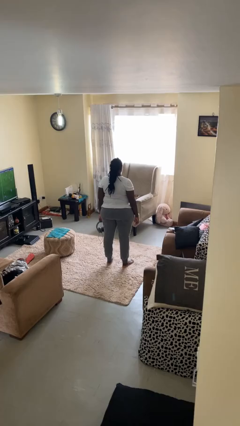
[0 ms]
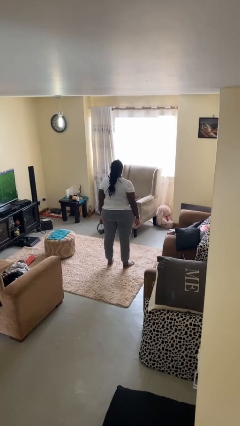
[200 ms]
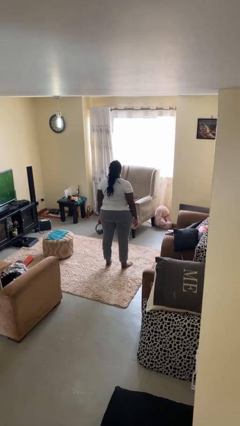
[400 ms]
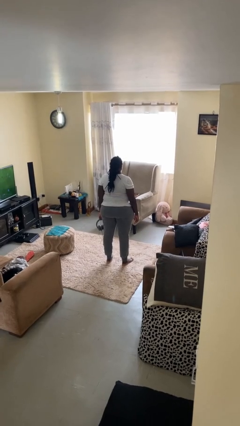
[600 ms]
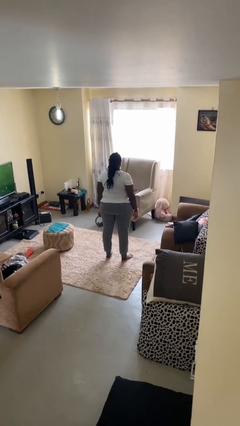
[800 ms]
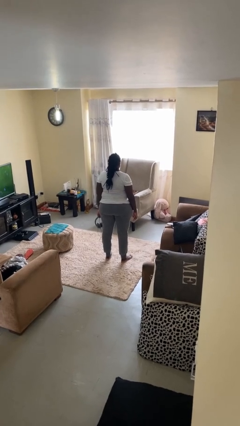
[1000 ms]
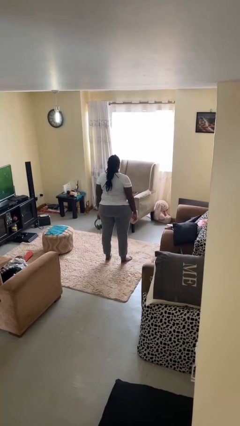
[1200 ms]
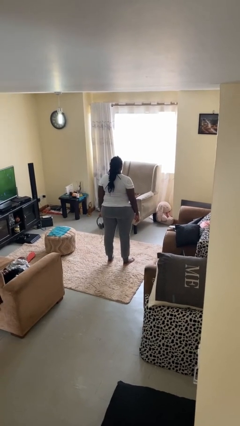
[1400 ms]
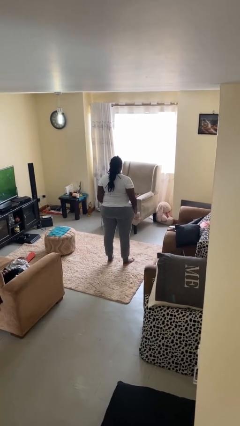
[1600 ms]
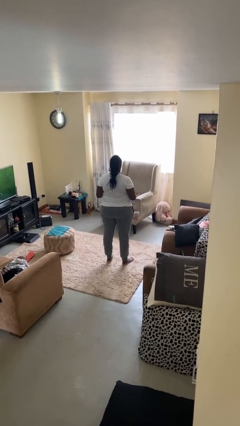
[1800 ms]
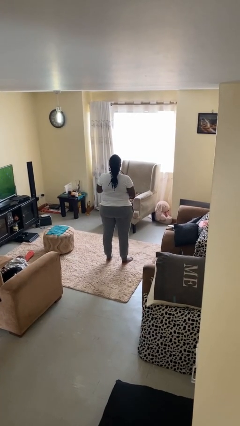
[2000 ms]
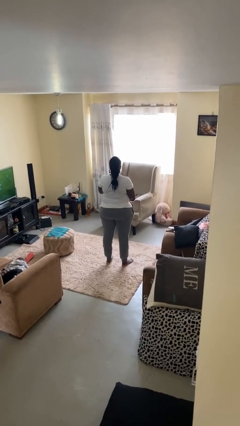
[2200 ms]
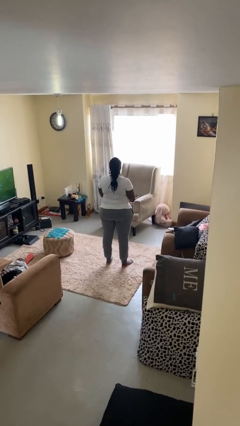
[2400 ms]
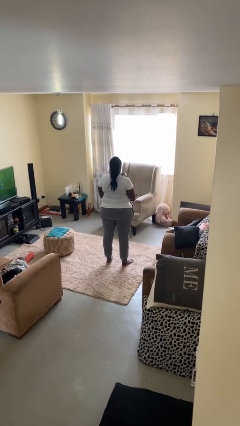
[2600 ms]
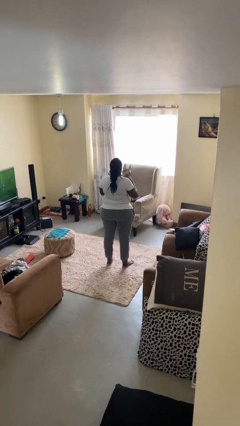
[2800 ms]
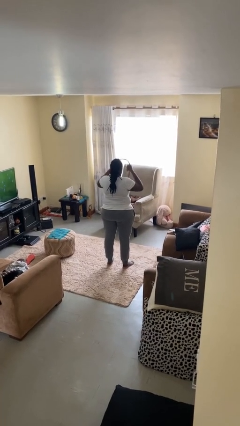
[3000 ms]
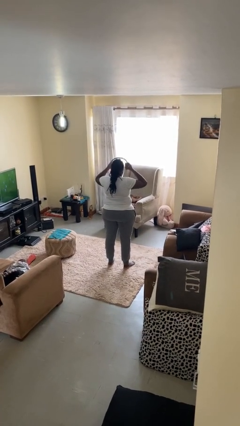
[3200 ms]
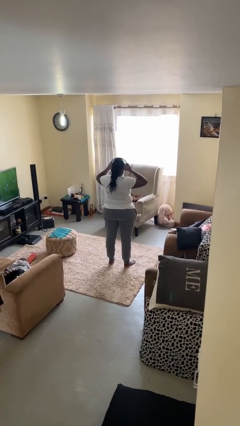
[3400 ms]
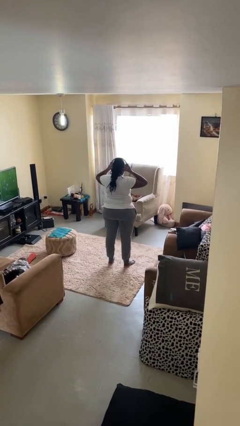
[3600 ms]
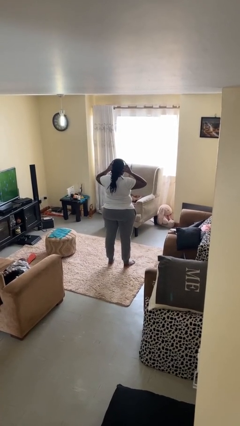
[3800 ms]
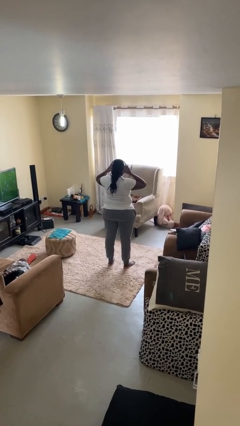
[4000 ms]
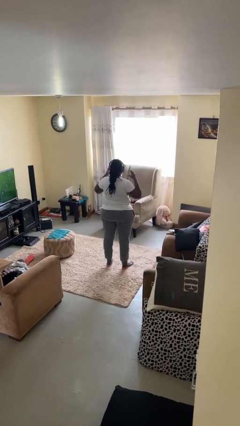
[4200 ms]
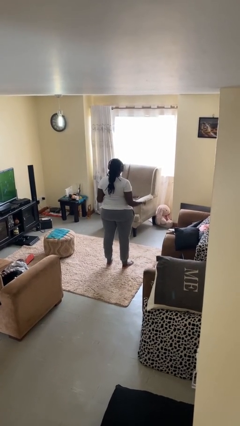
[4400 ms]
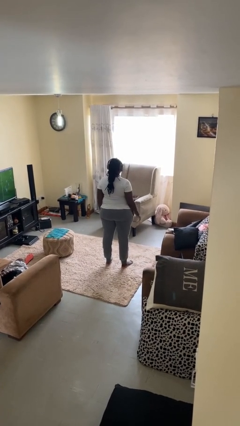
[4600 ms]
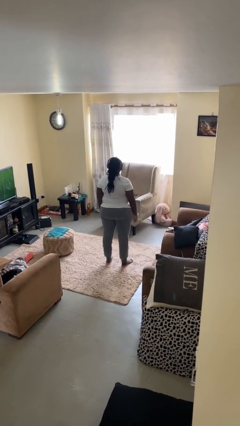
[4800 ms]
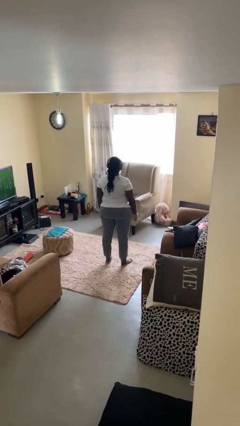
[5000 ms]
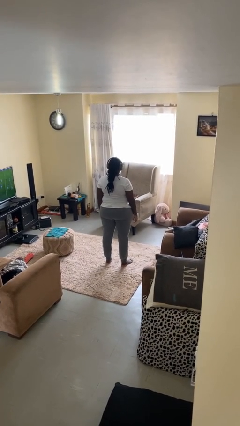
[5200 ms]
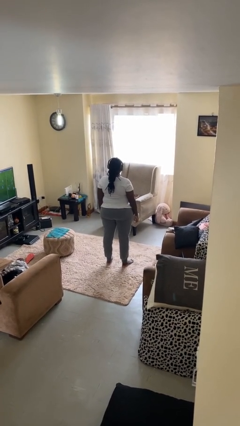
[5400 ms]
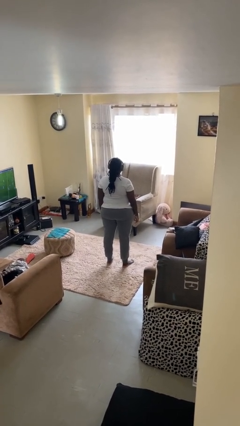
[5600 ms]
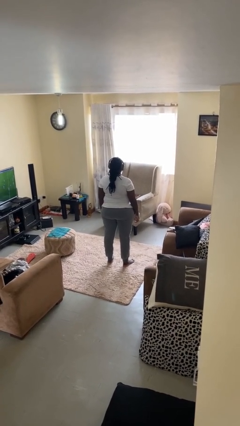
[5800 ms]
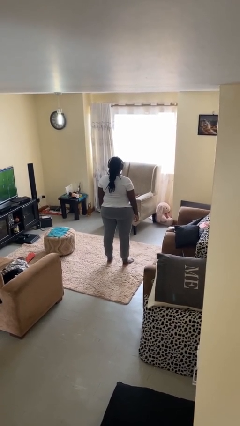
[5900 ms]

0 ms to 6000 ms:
person puts on headphones

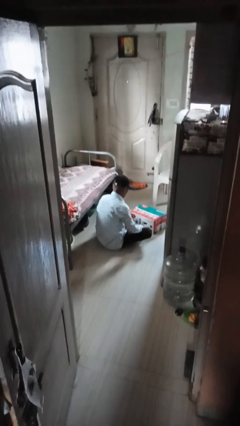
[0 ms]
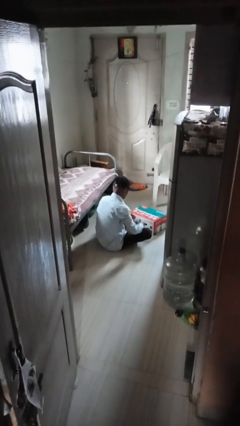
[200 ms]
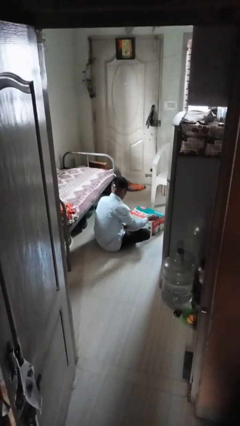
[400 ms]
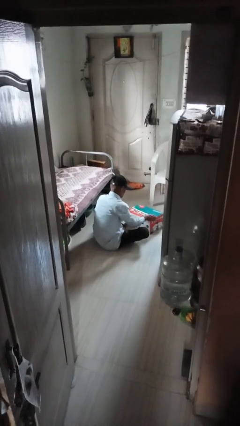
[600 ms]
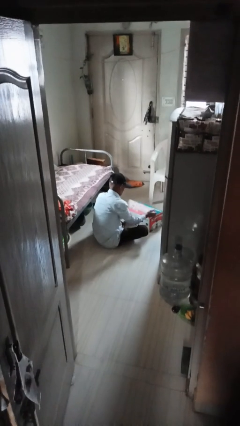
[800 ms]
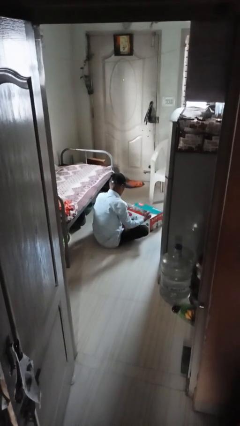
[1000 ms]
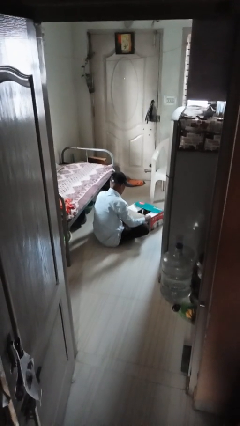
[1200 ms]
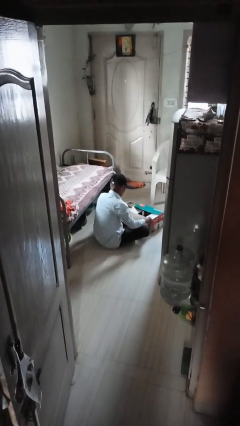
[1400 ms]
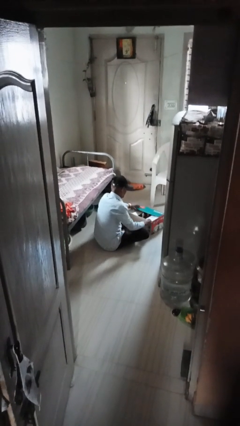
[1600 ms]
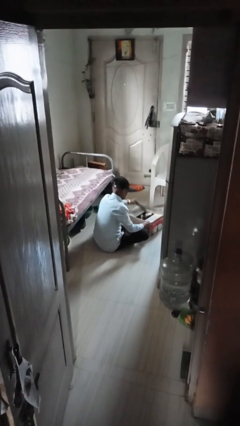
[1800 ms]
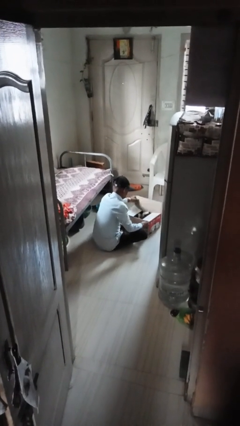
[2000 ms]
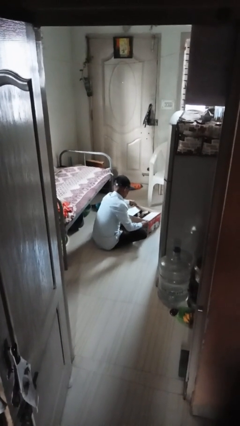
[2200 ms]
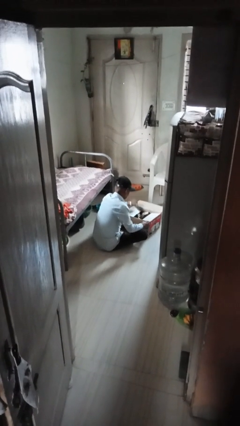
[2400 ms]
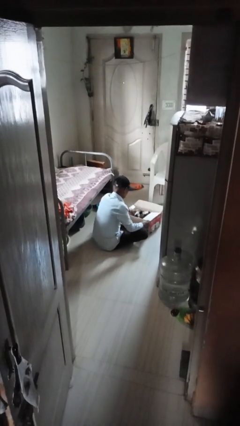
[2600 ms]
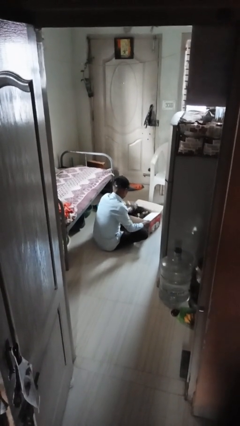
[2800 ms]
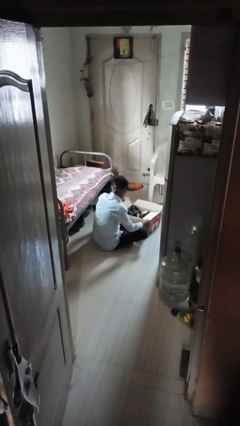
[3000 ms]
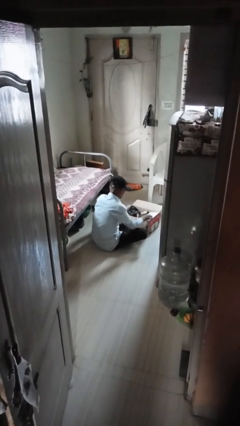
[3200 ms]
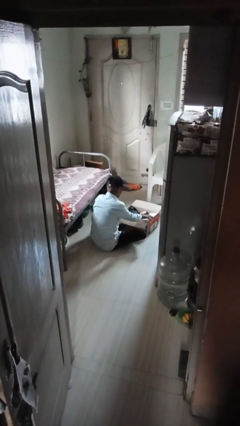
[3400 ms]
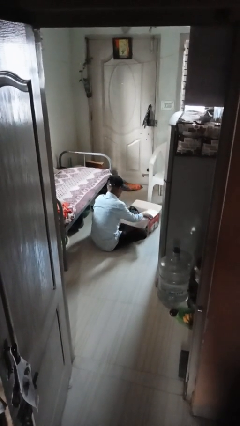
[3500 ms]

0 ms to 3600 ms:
person opens box

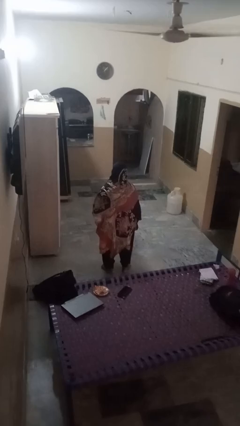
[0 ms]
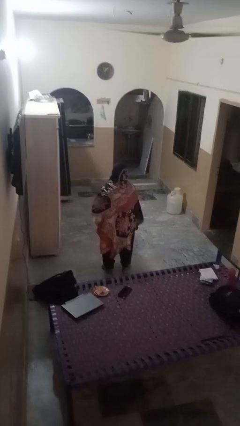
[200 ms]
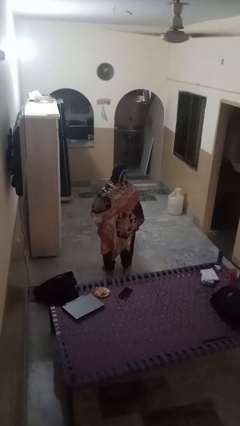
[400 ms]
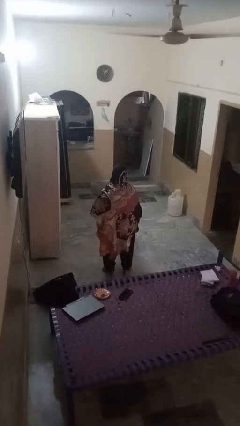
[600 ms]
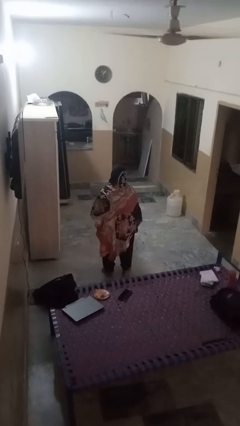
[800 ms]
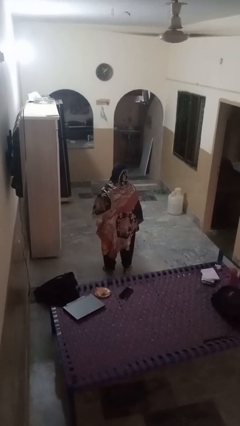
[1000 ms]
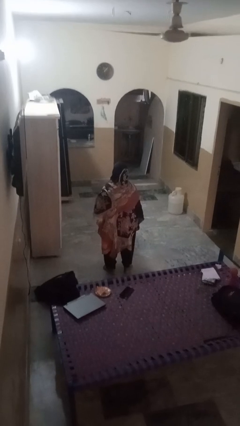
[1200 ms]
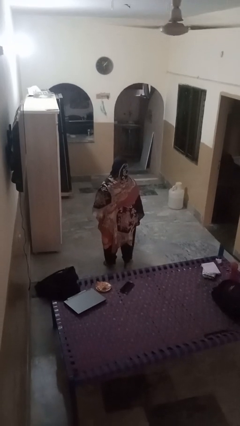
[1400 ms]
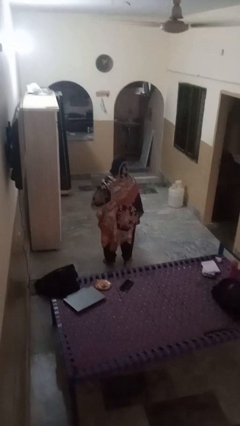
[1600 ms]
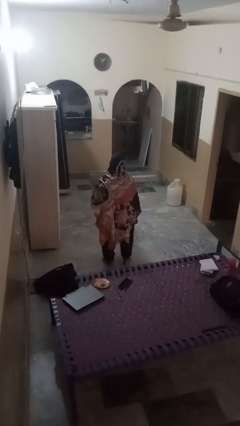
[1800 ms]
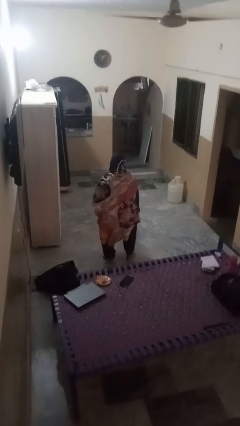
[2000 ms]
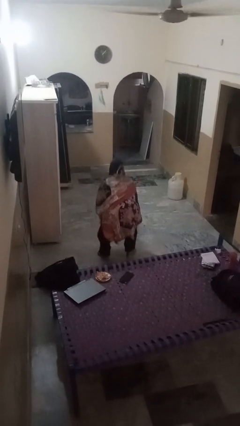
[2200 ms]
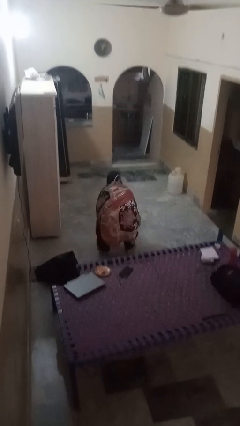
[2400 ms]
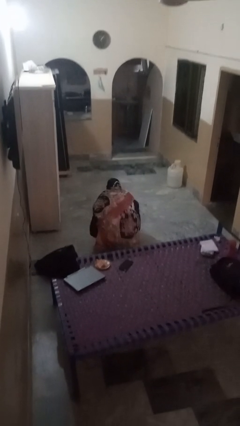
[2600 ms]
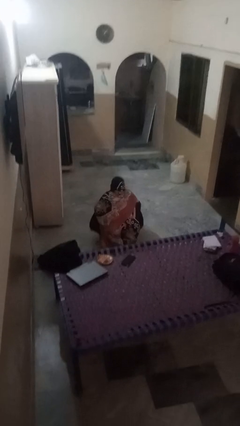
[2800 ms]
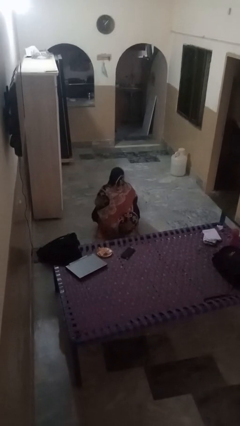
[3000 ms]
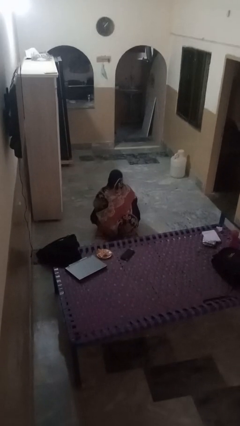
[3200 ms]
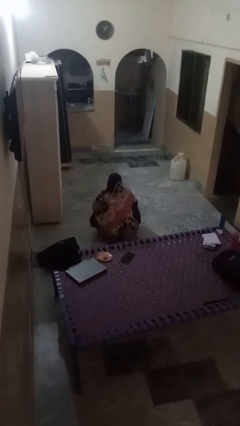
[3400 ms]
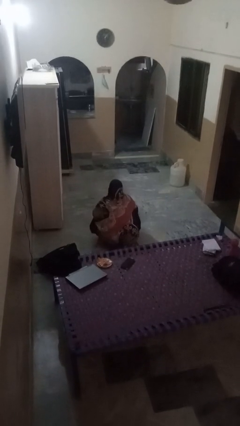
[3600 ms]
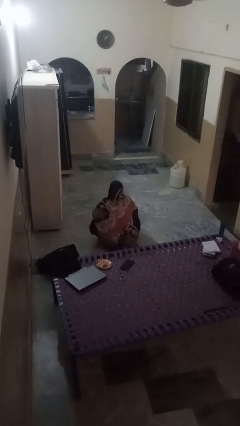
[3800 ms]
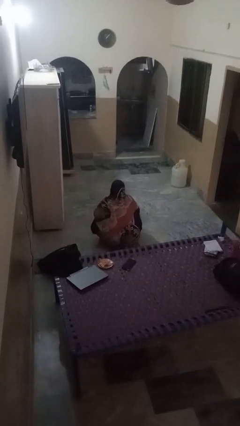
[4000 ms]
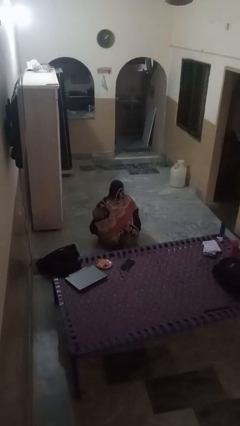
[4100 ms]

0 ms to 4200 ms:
person squats

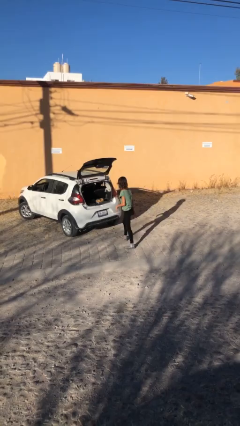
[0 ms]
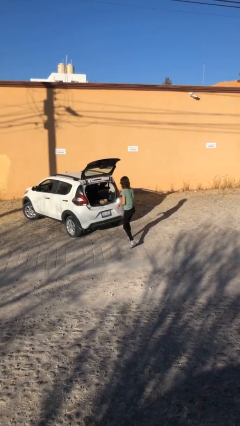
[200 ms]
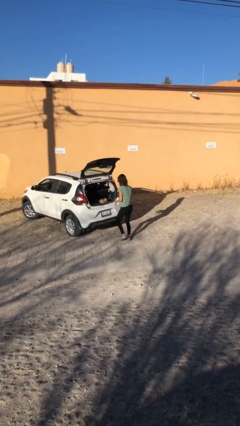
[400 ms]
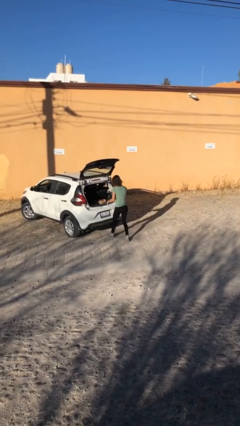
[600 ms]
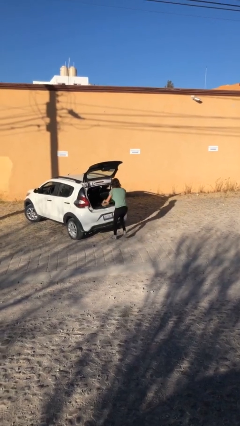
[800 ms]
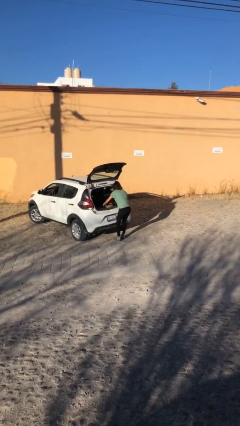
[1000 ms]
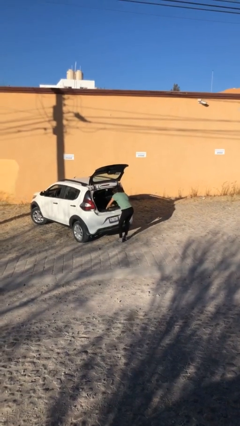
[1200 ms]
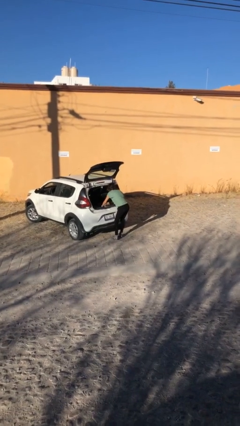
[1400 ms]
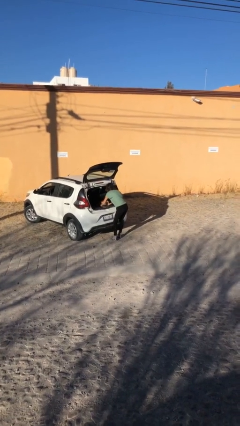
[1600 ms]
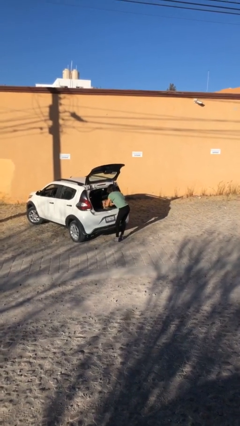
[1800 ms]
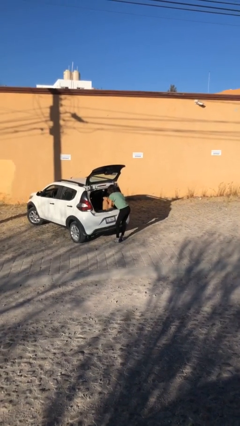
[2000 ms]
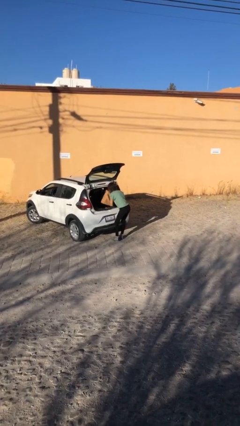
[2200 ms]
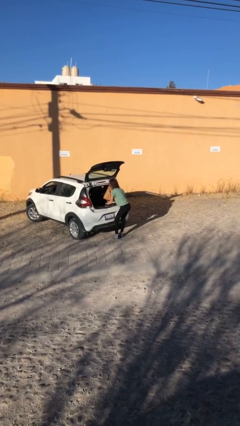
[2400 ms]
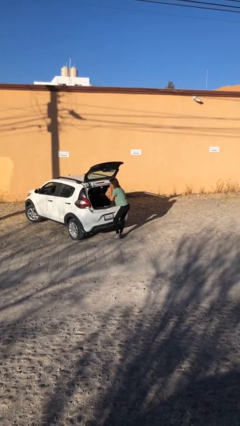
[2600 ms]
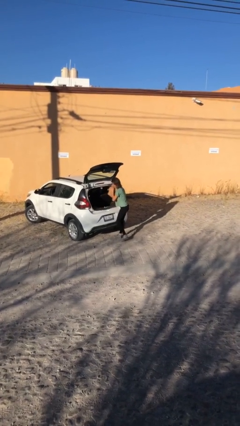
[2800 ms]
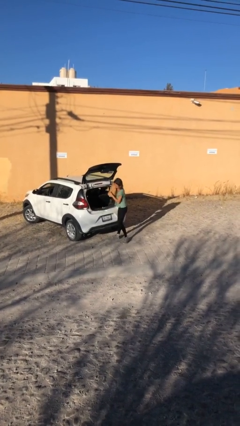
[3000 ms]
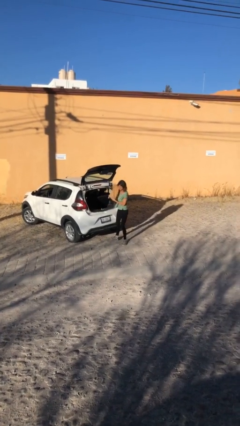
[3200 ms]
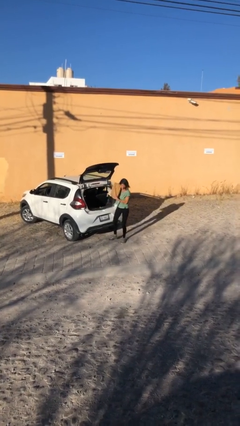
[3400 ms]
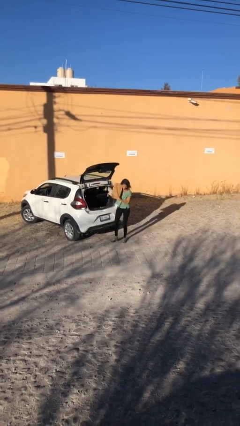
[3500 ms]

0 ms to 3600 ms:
person unloads car

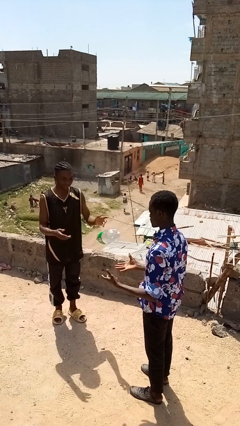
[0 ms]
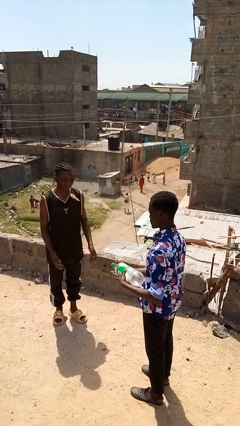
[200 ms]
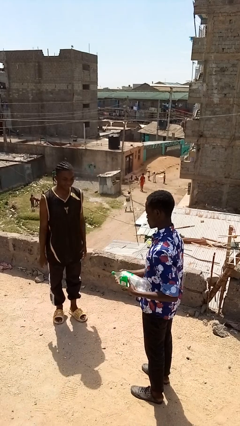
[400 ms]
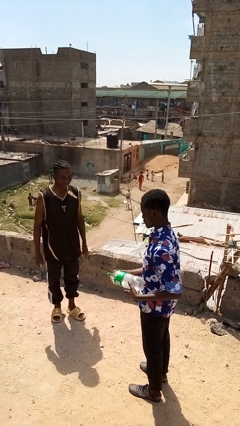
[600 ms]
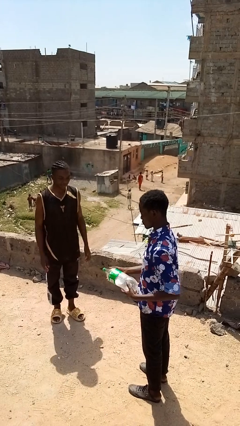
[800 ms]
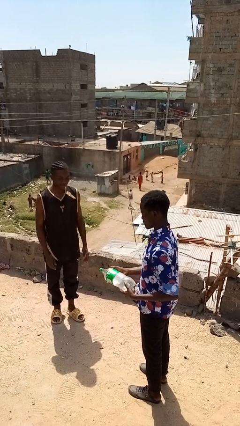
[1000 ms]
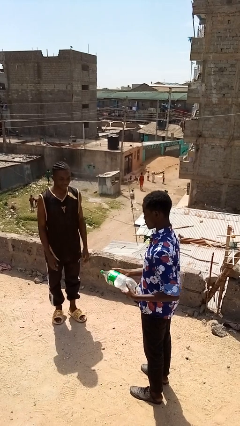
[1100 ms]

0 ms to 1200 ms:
person catches object from person
